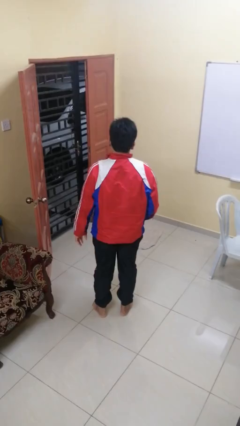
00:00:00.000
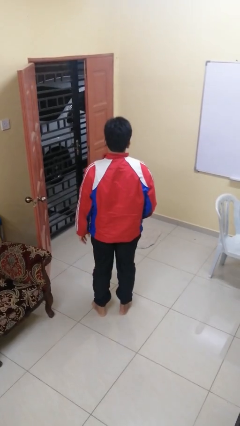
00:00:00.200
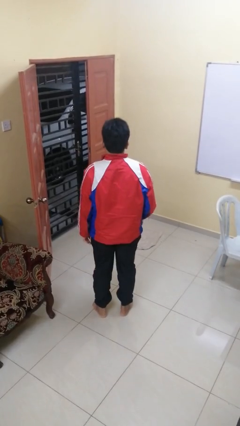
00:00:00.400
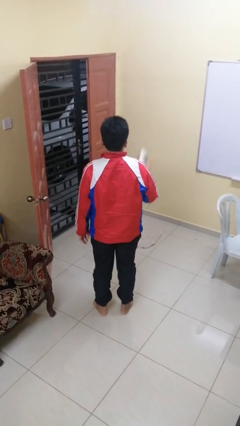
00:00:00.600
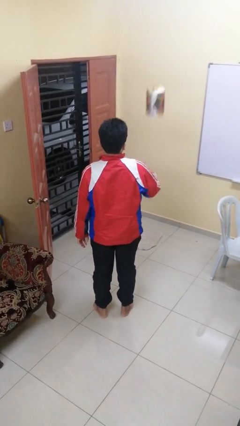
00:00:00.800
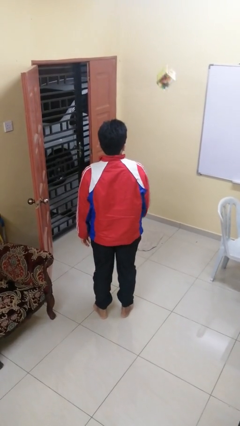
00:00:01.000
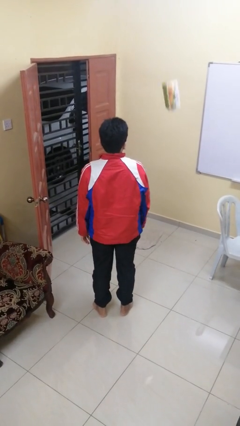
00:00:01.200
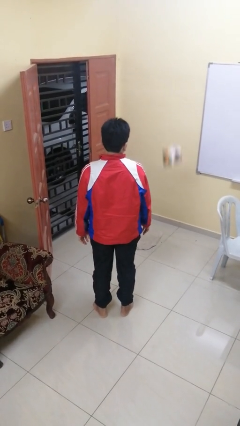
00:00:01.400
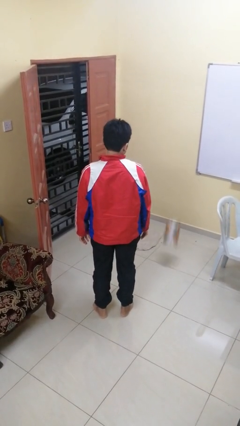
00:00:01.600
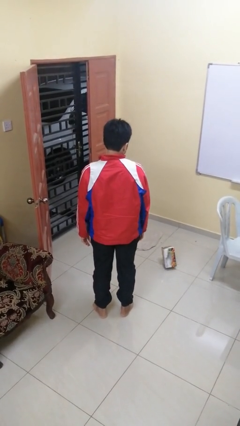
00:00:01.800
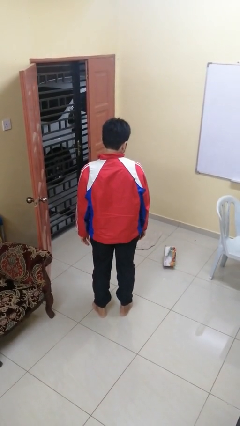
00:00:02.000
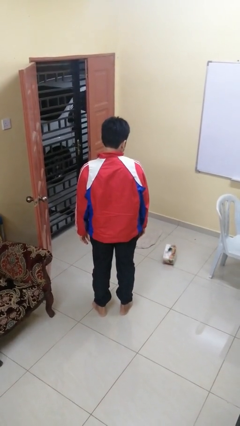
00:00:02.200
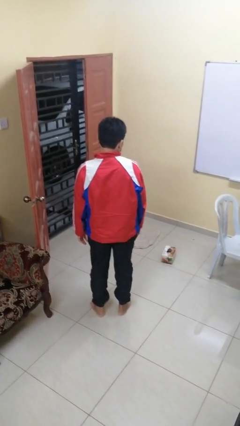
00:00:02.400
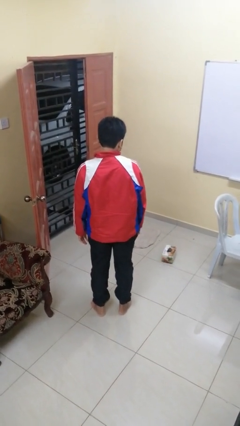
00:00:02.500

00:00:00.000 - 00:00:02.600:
person throws object into air

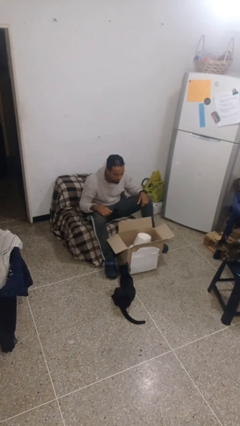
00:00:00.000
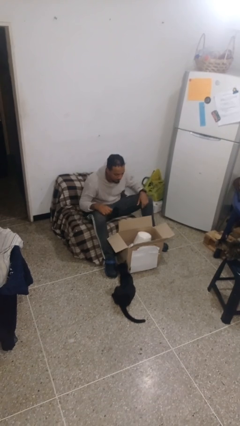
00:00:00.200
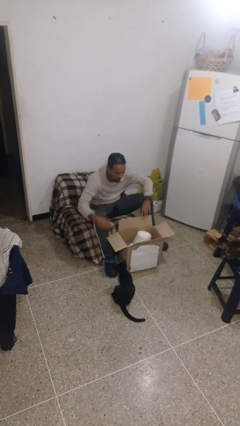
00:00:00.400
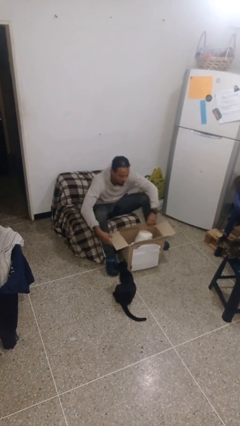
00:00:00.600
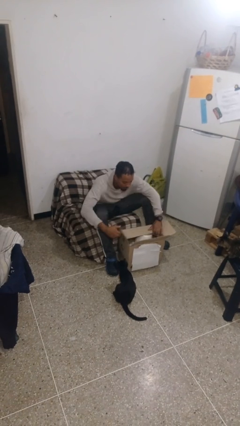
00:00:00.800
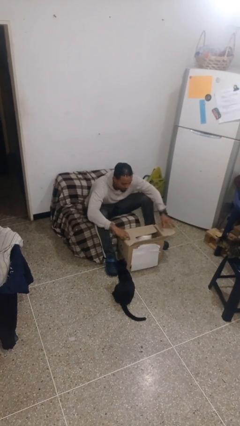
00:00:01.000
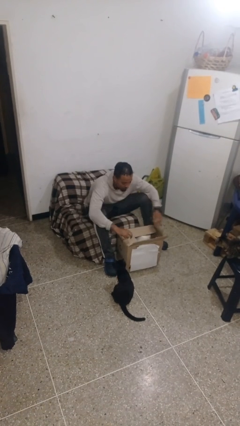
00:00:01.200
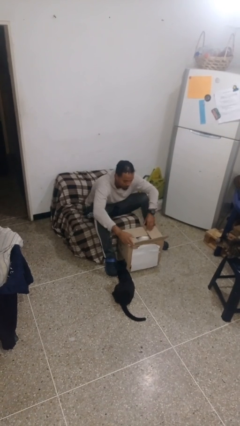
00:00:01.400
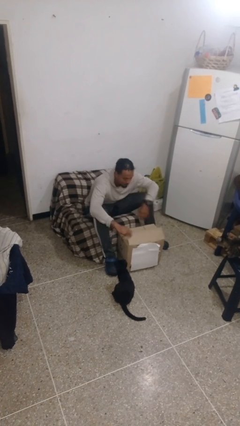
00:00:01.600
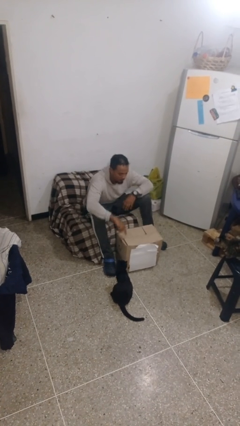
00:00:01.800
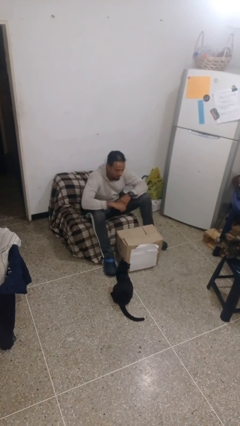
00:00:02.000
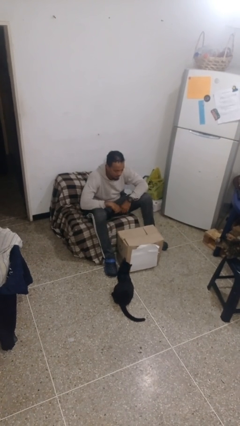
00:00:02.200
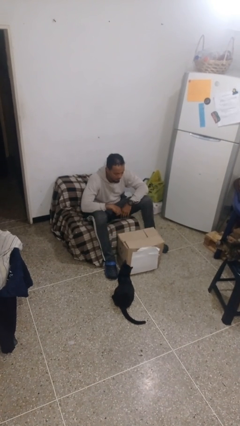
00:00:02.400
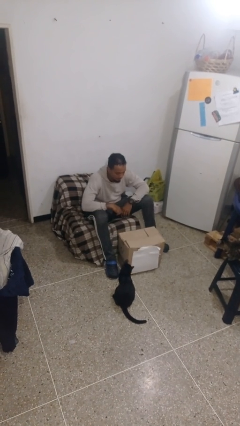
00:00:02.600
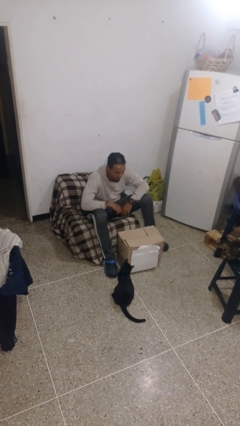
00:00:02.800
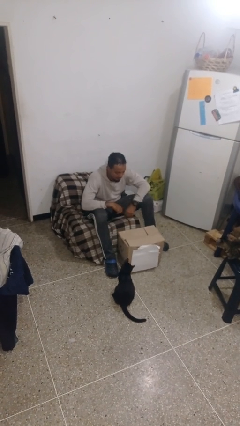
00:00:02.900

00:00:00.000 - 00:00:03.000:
person closes box

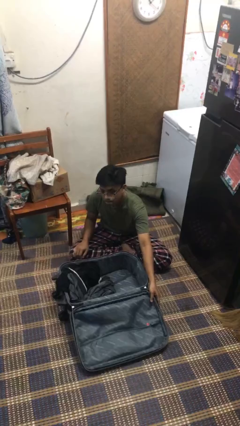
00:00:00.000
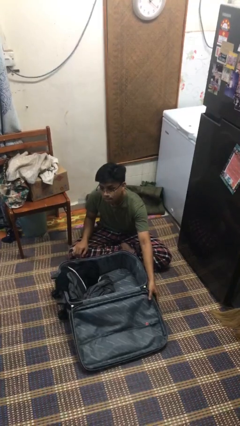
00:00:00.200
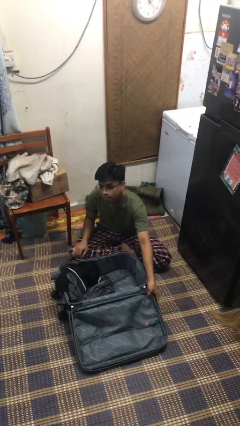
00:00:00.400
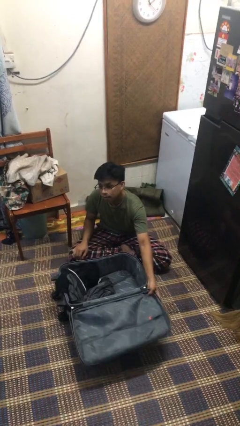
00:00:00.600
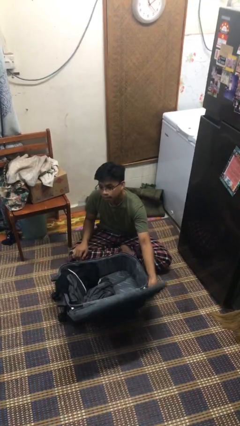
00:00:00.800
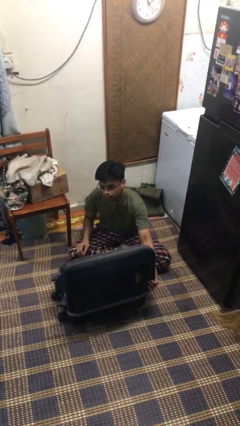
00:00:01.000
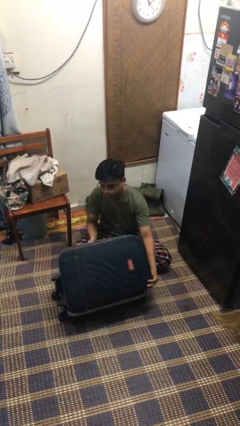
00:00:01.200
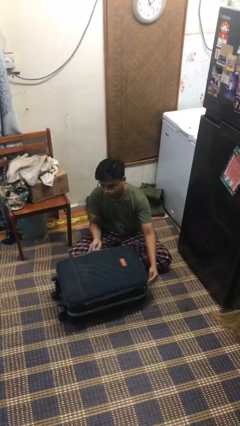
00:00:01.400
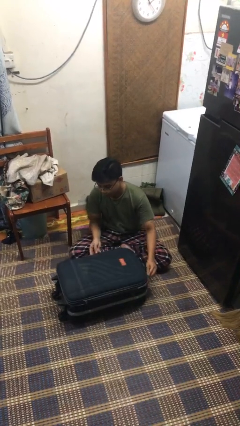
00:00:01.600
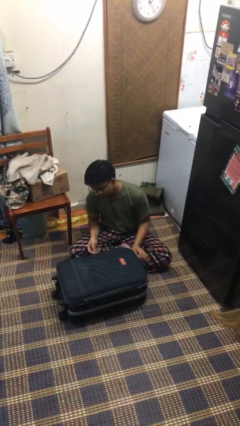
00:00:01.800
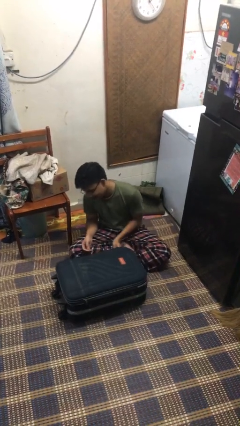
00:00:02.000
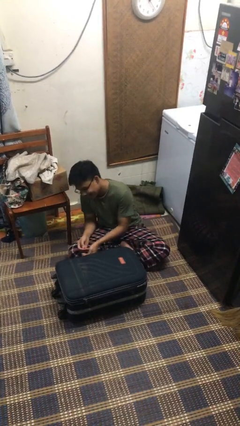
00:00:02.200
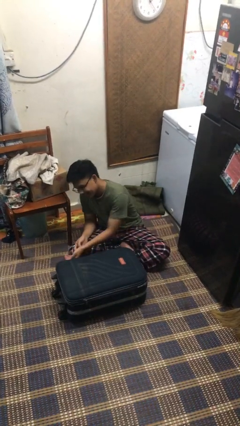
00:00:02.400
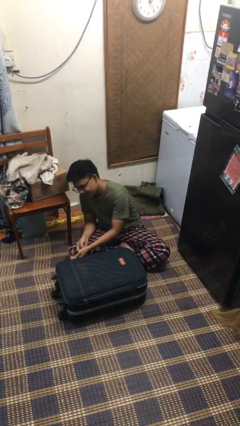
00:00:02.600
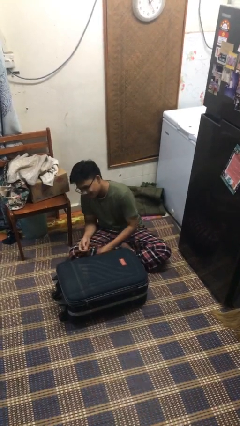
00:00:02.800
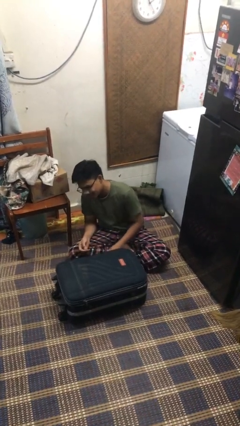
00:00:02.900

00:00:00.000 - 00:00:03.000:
person closes suitcase

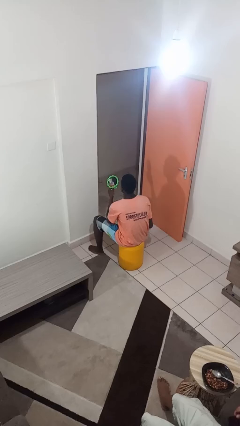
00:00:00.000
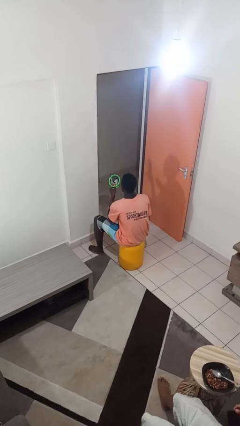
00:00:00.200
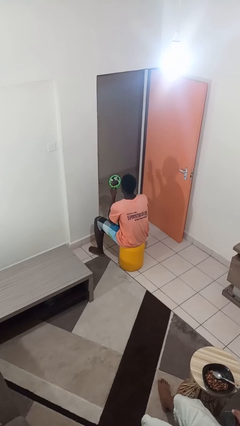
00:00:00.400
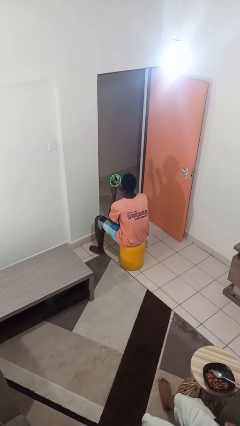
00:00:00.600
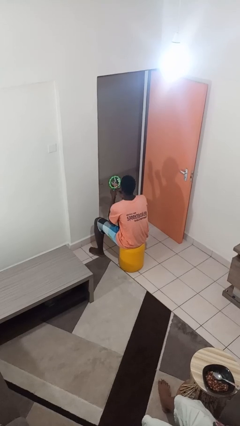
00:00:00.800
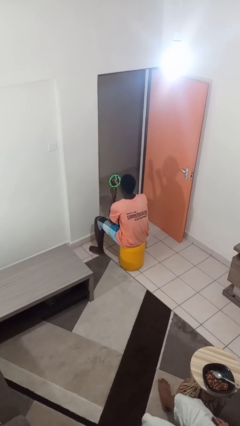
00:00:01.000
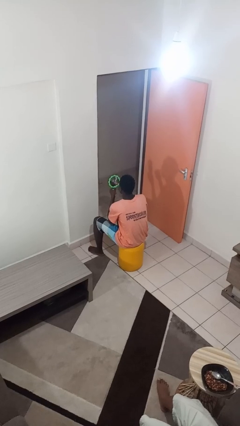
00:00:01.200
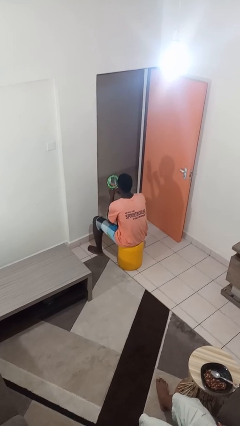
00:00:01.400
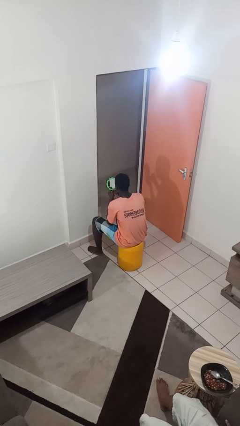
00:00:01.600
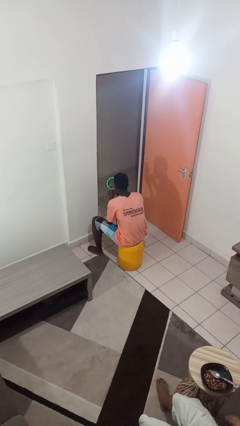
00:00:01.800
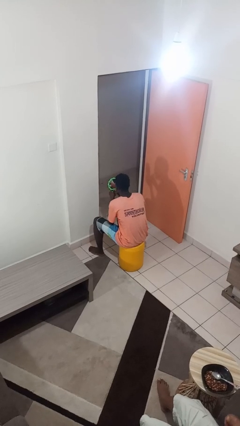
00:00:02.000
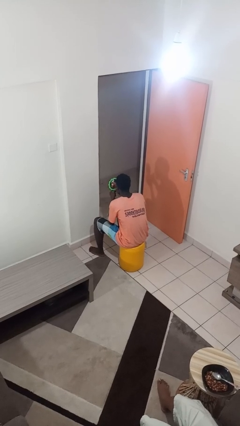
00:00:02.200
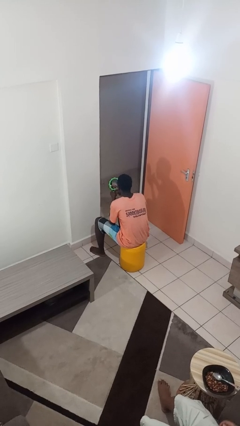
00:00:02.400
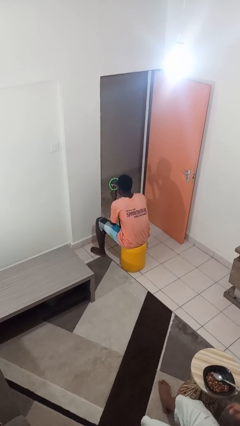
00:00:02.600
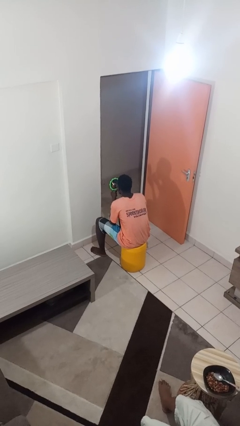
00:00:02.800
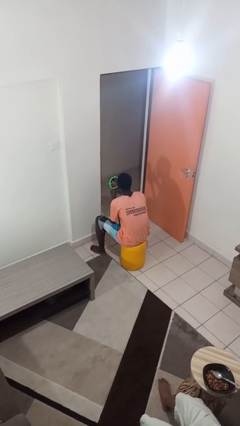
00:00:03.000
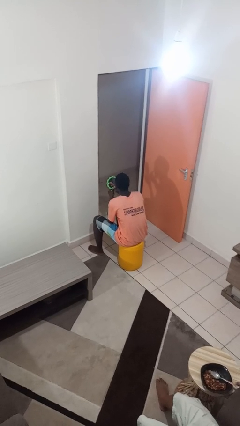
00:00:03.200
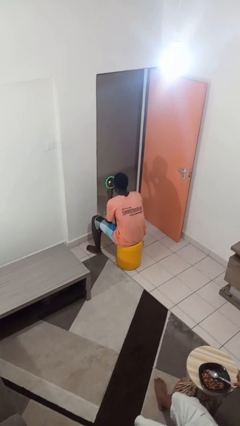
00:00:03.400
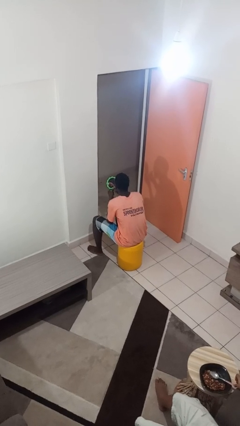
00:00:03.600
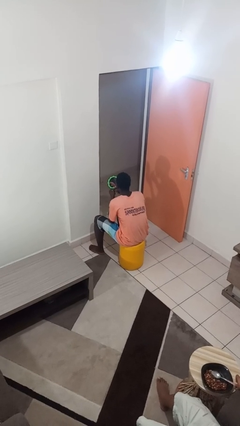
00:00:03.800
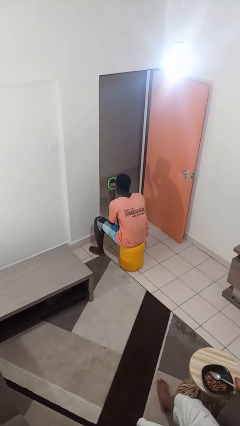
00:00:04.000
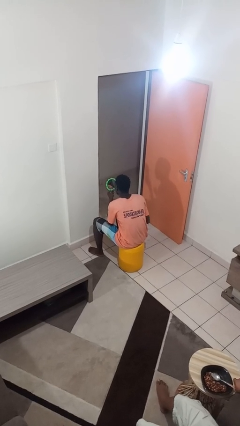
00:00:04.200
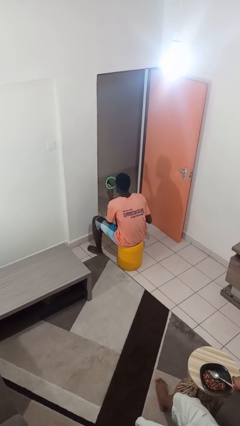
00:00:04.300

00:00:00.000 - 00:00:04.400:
person applies lip makeup

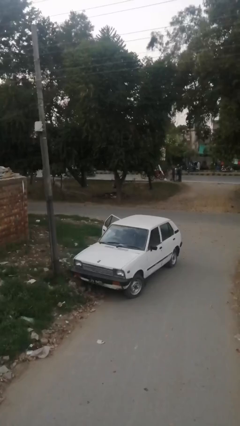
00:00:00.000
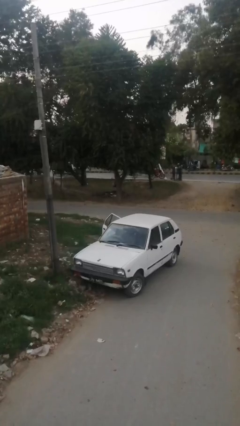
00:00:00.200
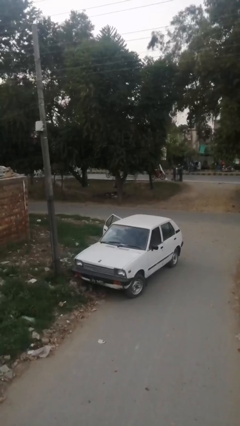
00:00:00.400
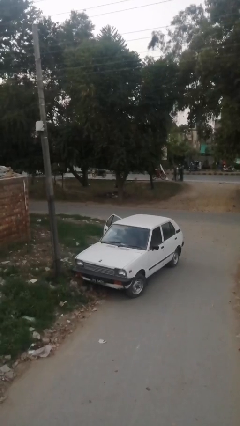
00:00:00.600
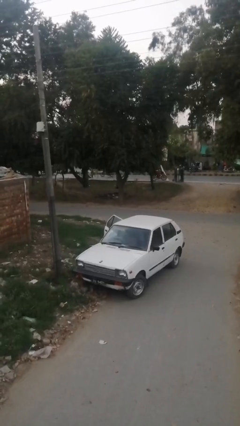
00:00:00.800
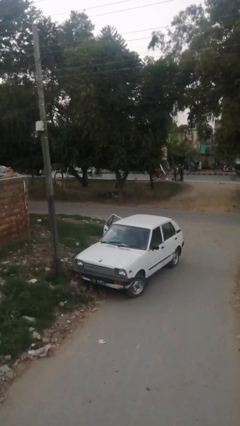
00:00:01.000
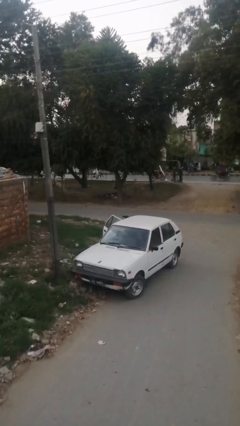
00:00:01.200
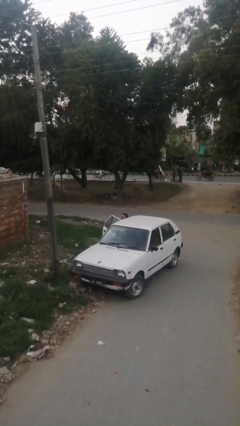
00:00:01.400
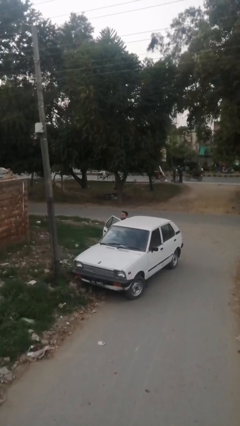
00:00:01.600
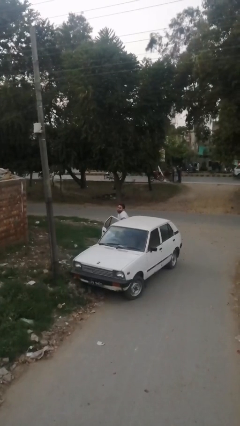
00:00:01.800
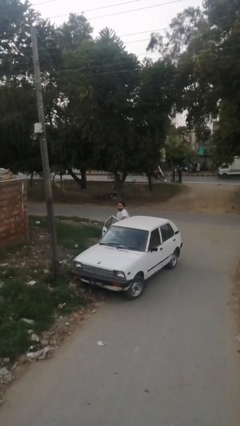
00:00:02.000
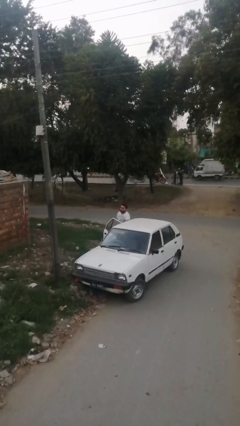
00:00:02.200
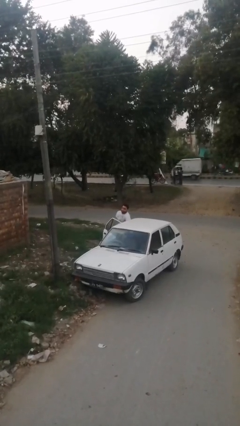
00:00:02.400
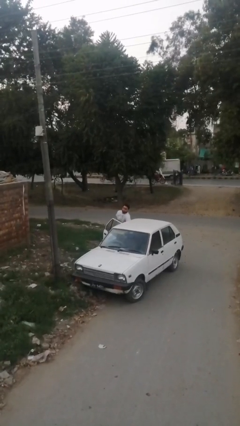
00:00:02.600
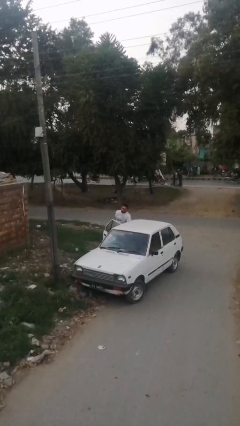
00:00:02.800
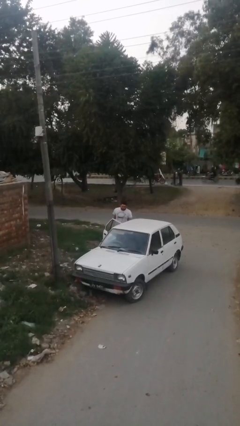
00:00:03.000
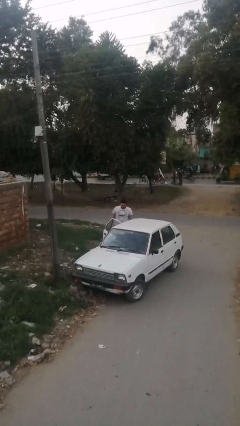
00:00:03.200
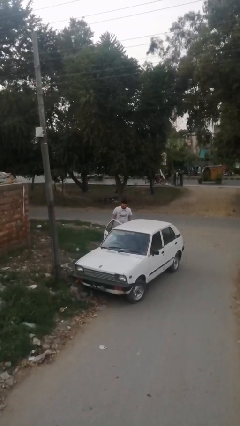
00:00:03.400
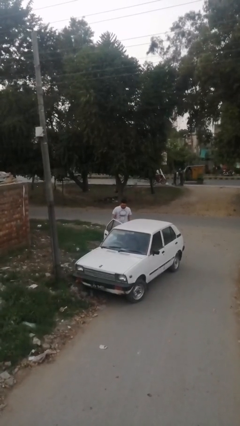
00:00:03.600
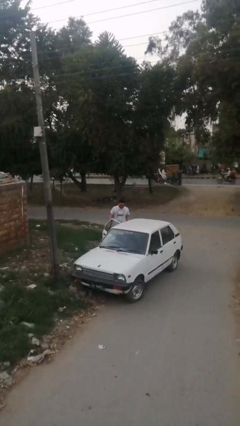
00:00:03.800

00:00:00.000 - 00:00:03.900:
person exits car

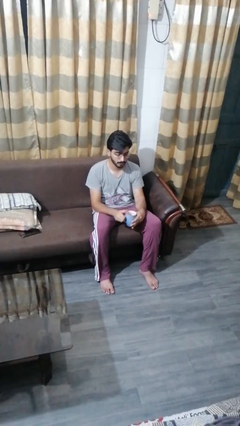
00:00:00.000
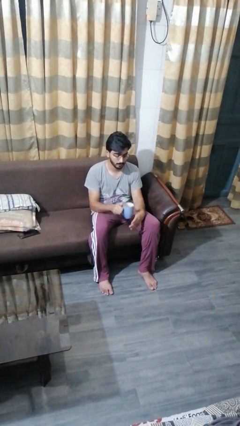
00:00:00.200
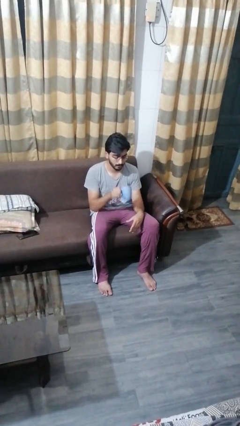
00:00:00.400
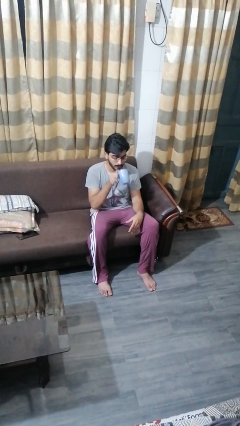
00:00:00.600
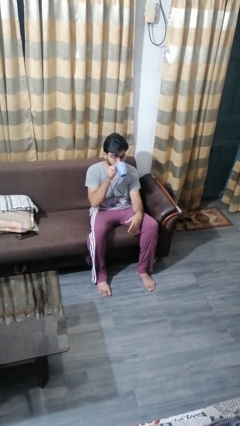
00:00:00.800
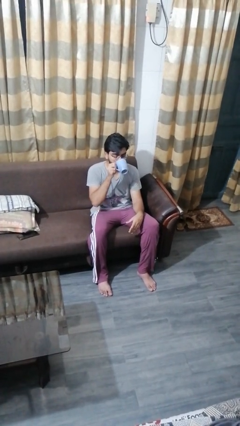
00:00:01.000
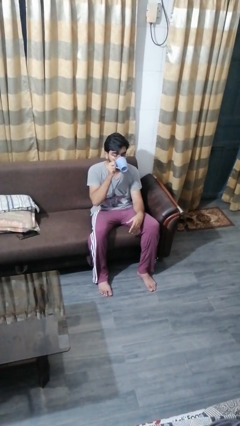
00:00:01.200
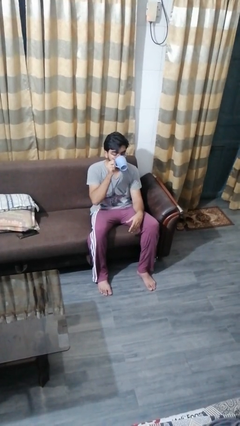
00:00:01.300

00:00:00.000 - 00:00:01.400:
person drinks from mug
